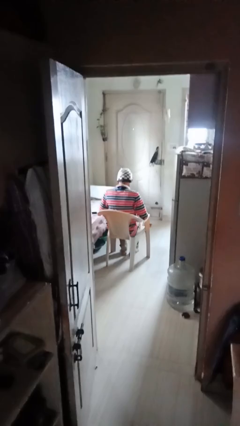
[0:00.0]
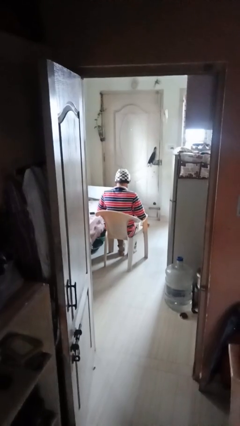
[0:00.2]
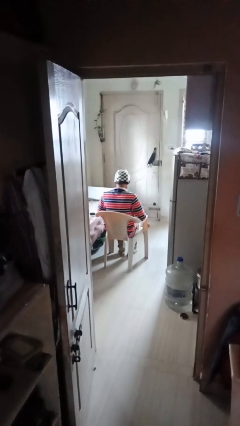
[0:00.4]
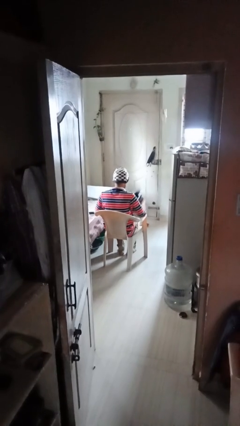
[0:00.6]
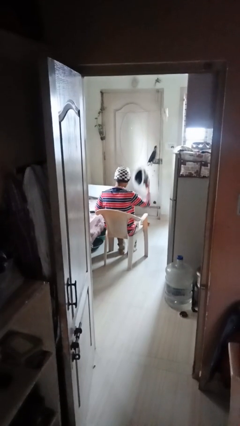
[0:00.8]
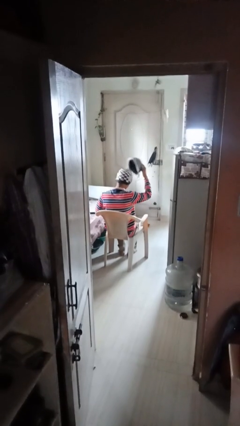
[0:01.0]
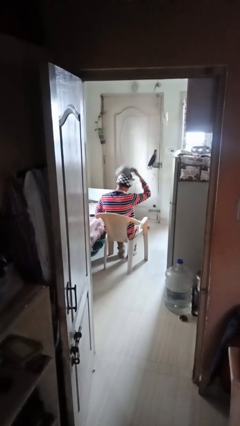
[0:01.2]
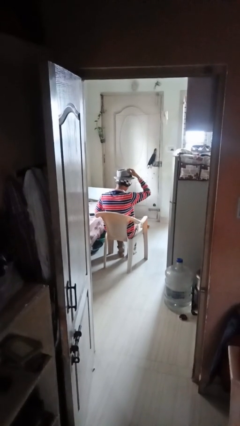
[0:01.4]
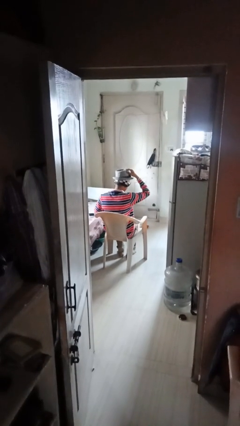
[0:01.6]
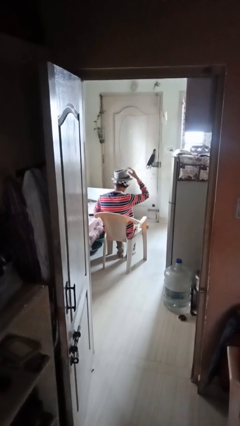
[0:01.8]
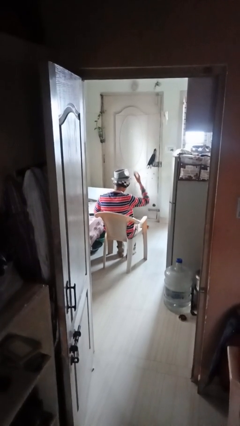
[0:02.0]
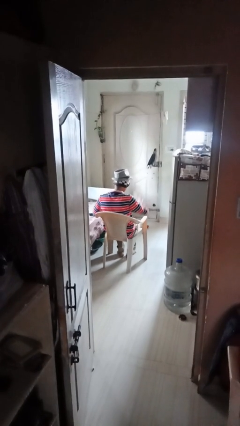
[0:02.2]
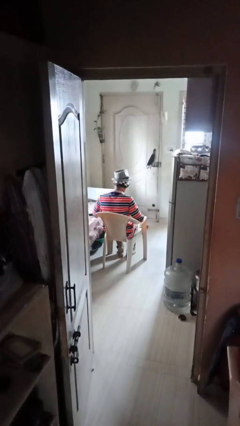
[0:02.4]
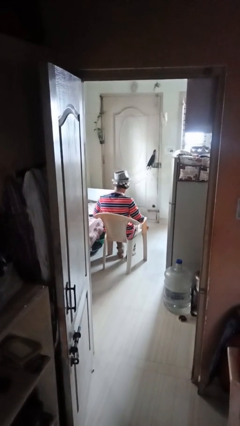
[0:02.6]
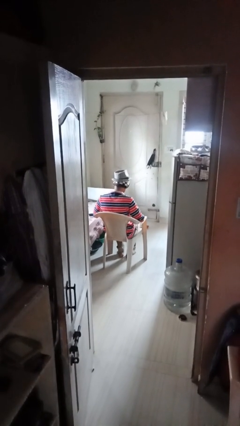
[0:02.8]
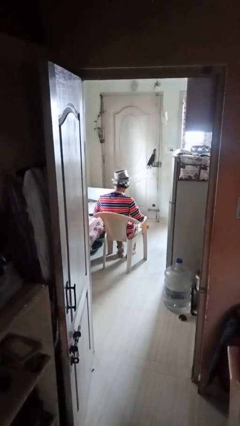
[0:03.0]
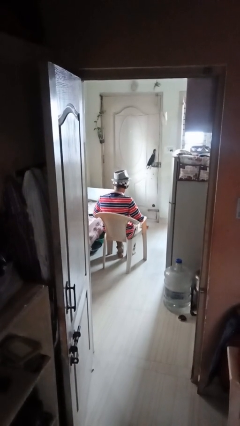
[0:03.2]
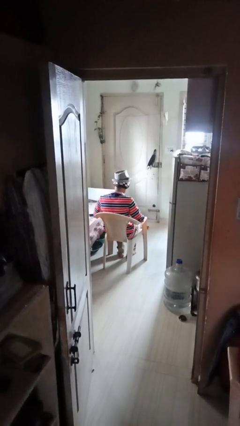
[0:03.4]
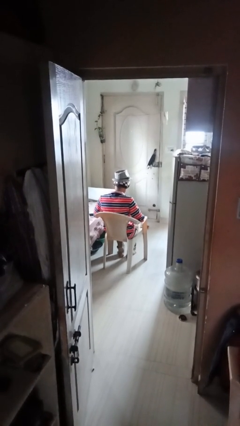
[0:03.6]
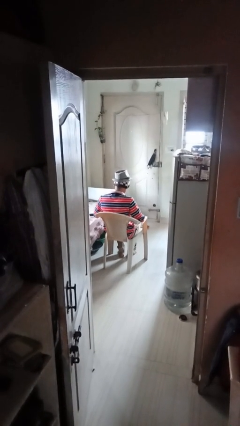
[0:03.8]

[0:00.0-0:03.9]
person puts on hat

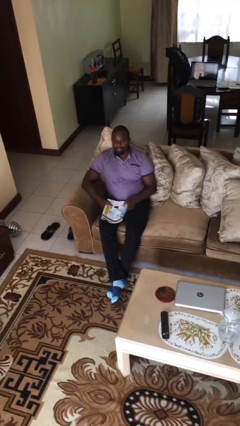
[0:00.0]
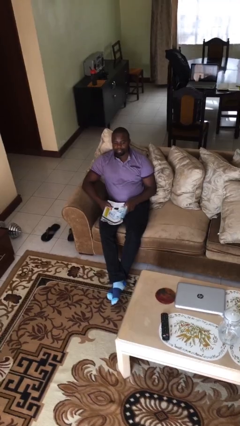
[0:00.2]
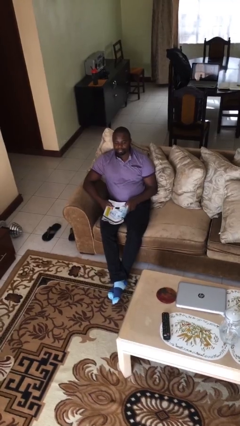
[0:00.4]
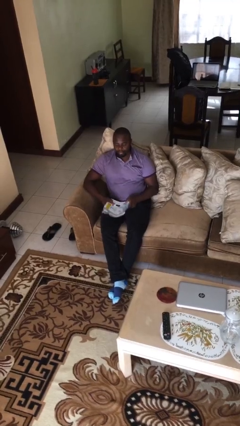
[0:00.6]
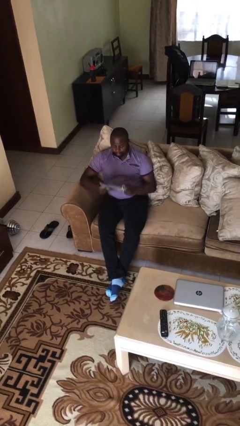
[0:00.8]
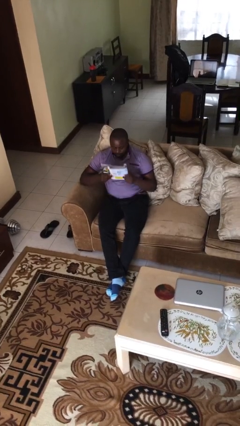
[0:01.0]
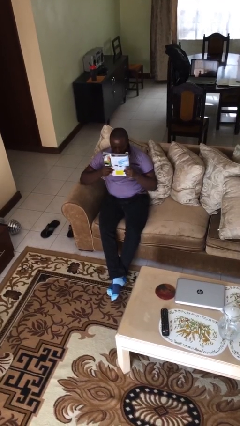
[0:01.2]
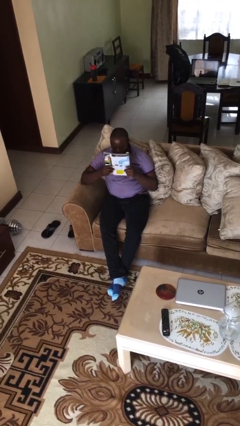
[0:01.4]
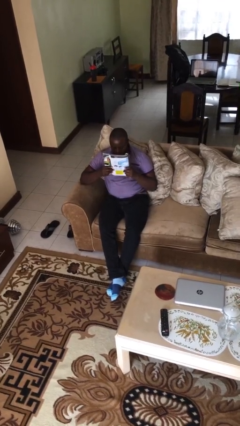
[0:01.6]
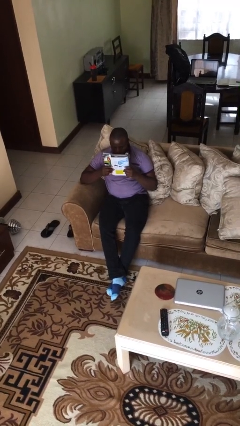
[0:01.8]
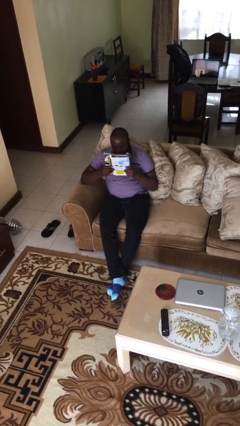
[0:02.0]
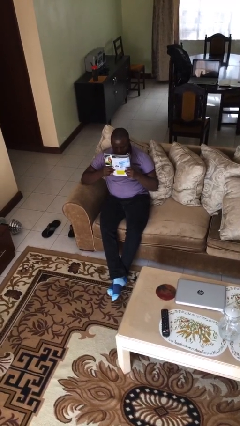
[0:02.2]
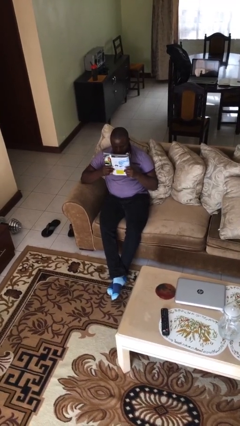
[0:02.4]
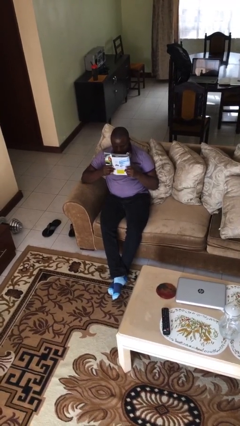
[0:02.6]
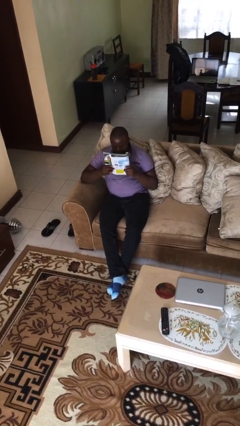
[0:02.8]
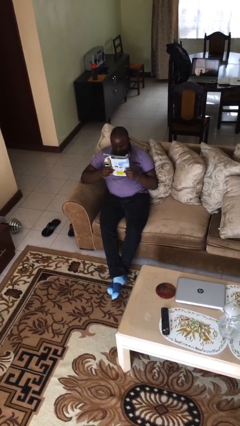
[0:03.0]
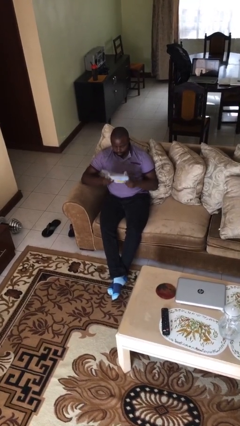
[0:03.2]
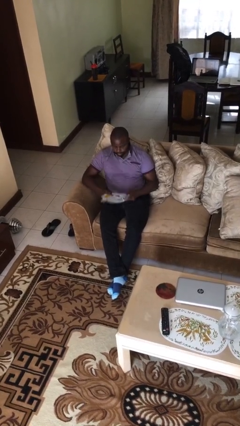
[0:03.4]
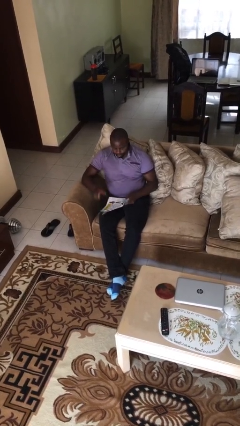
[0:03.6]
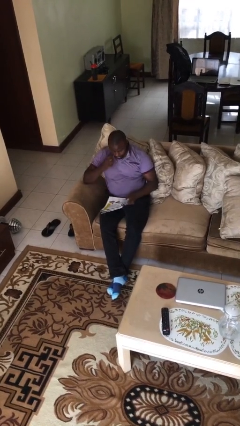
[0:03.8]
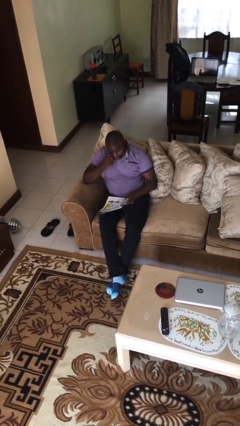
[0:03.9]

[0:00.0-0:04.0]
person reads document

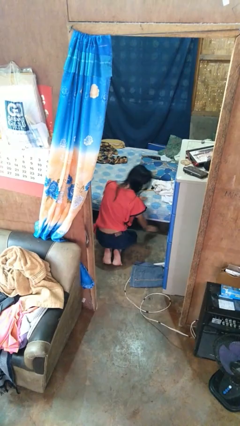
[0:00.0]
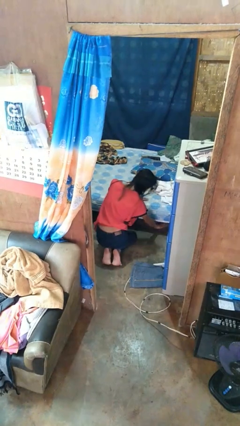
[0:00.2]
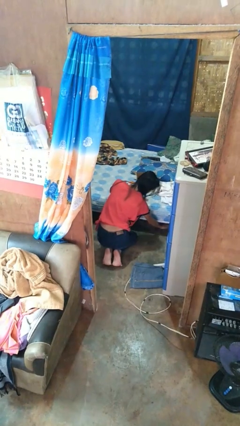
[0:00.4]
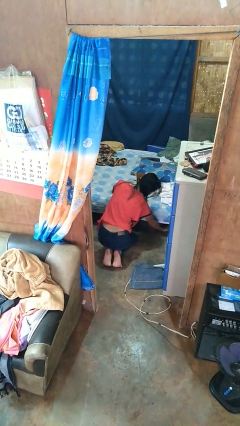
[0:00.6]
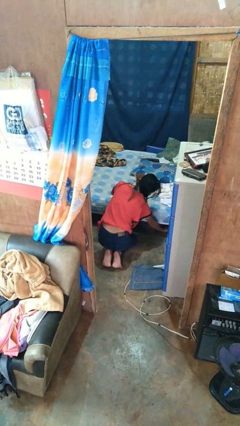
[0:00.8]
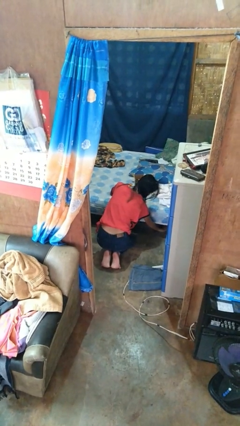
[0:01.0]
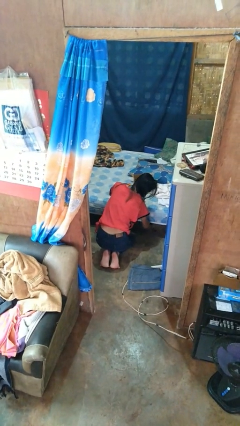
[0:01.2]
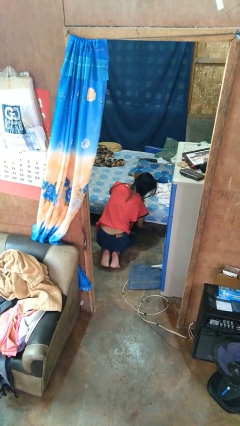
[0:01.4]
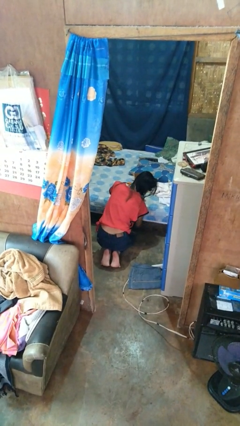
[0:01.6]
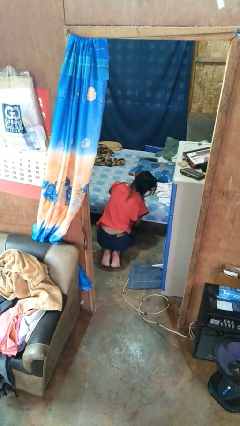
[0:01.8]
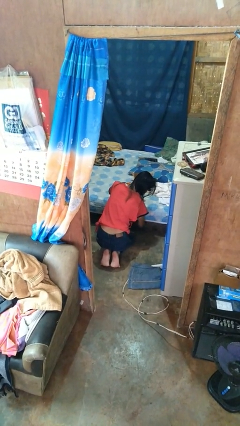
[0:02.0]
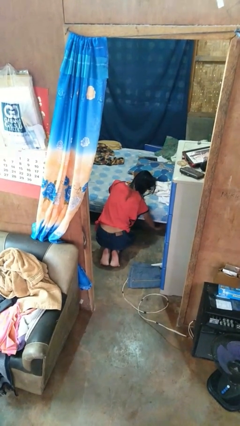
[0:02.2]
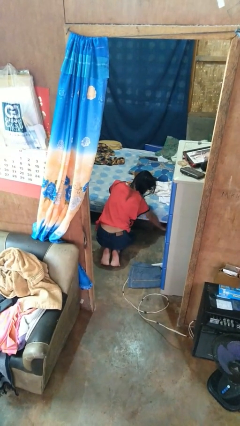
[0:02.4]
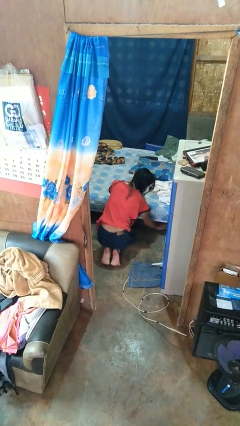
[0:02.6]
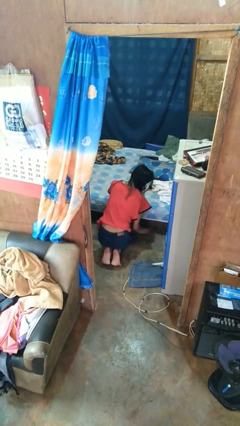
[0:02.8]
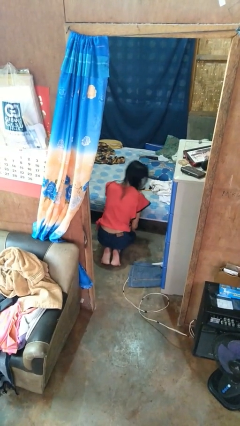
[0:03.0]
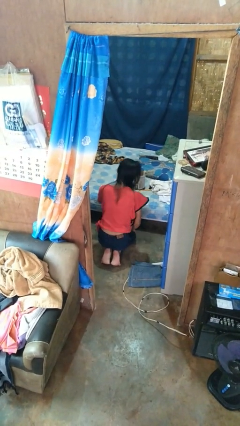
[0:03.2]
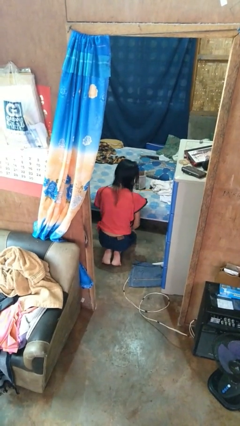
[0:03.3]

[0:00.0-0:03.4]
person searches under bed

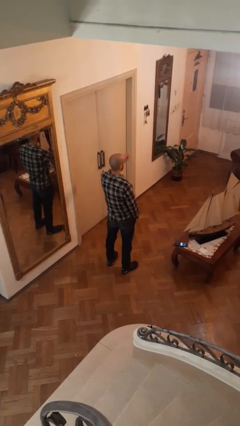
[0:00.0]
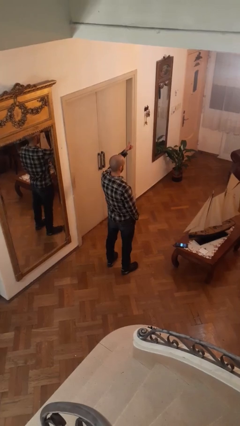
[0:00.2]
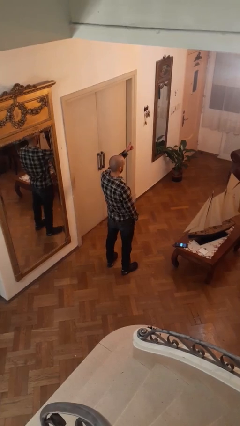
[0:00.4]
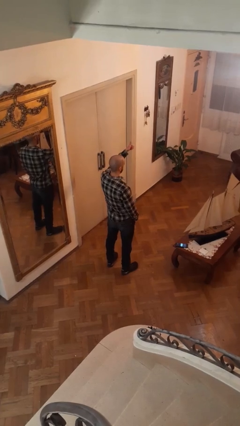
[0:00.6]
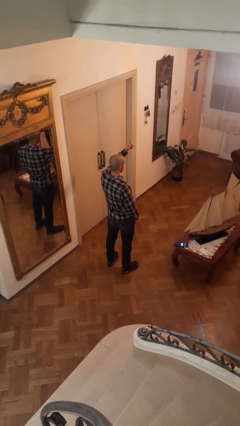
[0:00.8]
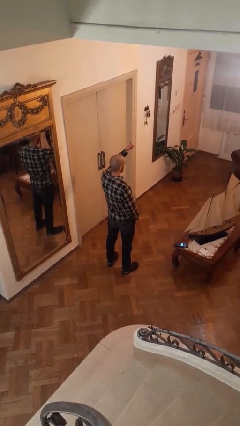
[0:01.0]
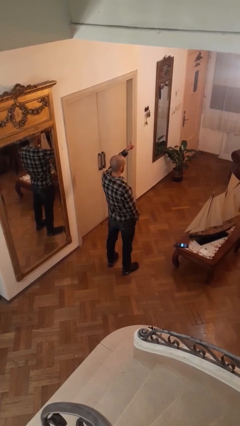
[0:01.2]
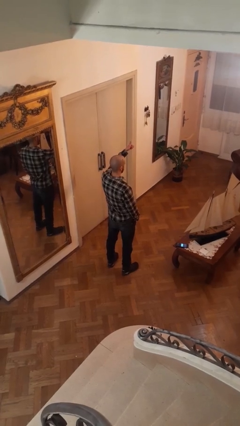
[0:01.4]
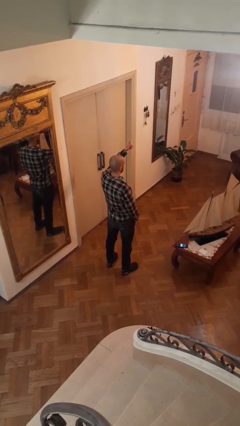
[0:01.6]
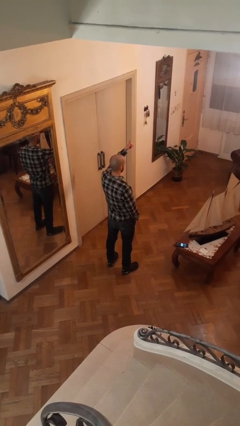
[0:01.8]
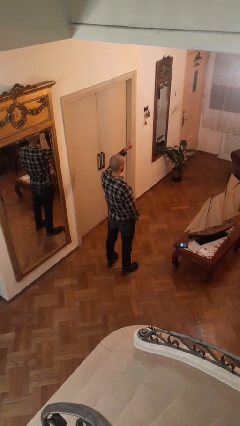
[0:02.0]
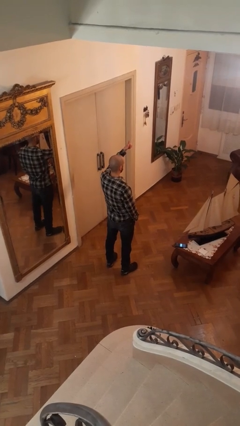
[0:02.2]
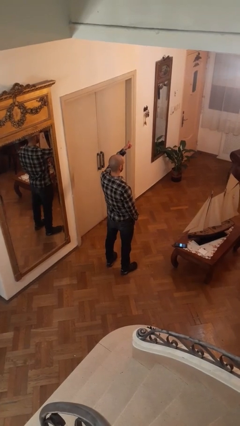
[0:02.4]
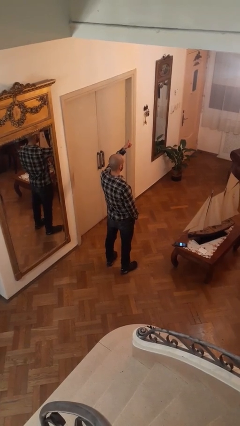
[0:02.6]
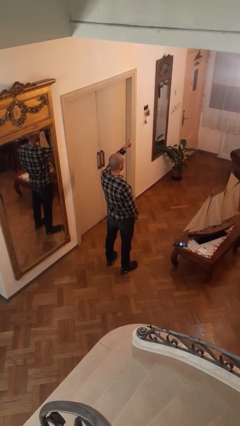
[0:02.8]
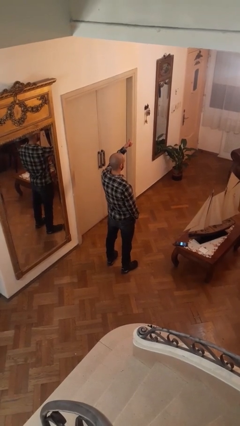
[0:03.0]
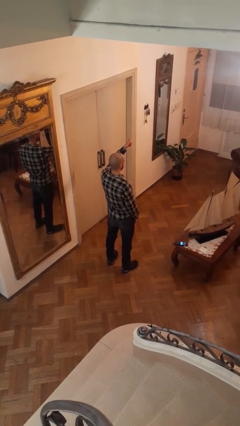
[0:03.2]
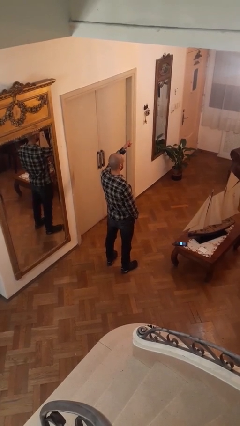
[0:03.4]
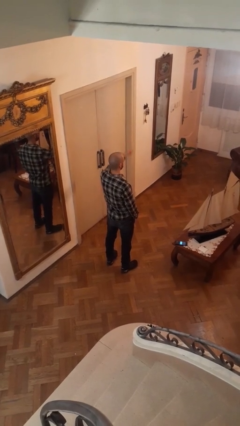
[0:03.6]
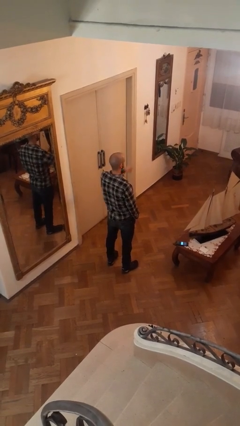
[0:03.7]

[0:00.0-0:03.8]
person gestures thumbs up

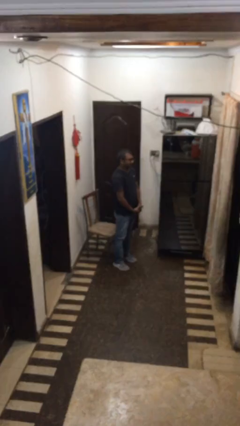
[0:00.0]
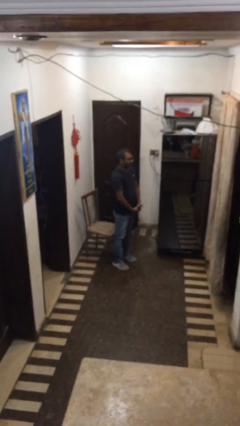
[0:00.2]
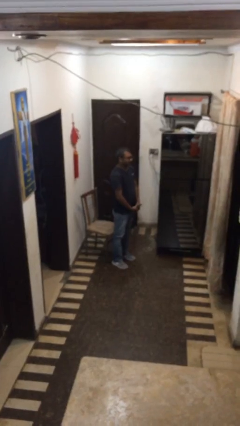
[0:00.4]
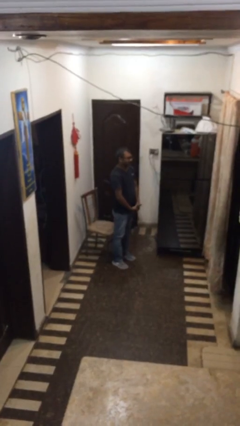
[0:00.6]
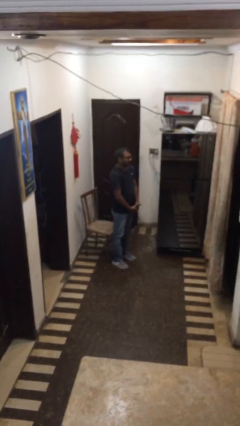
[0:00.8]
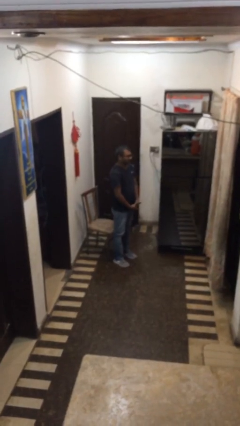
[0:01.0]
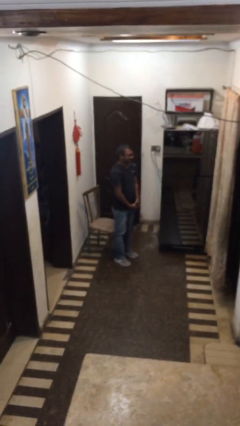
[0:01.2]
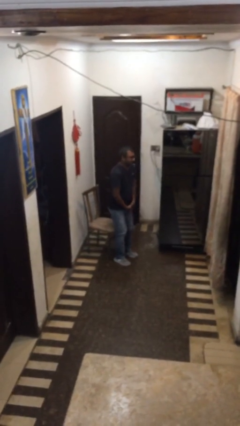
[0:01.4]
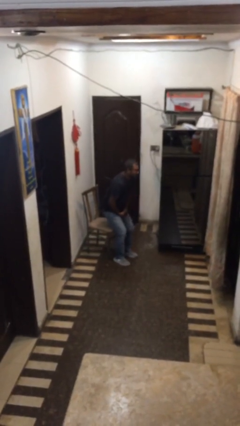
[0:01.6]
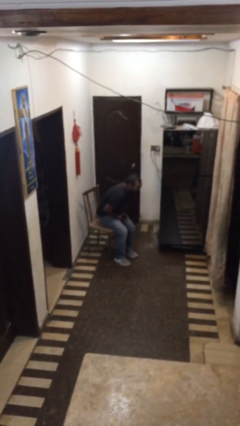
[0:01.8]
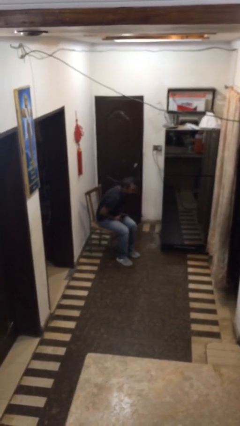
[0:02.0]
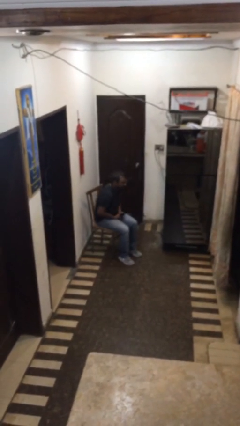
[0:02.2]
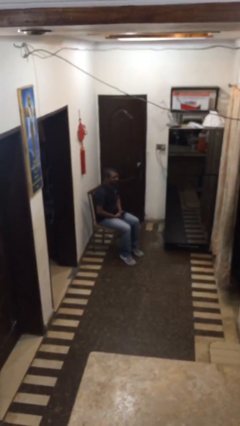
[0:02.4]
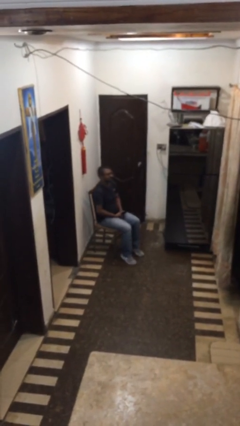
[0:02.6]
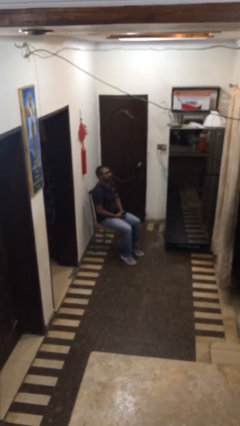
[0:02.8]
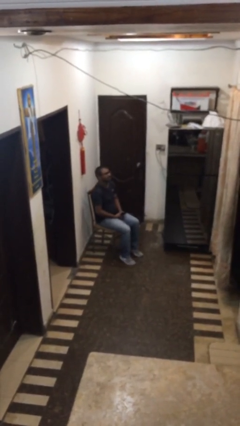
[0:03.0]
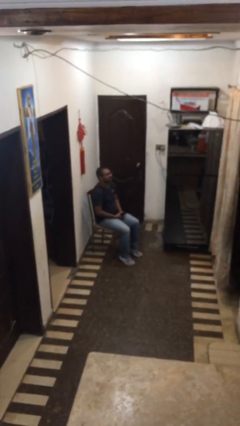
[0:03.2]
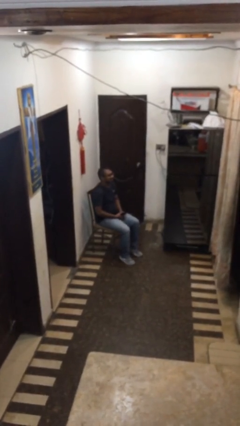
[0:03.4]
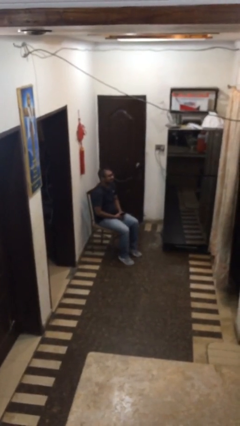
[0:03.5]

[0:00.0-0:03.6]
person sits down
